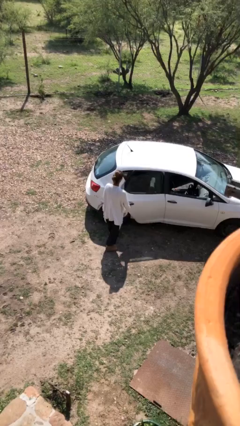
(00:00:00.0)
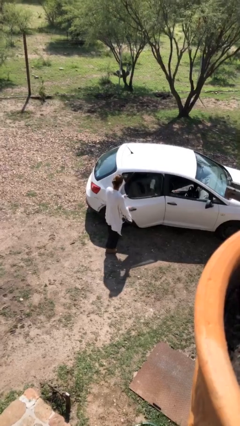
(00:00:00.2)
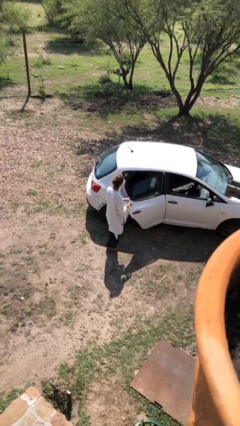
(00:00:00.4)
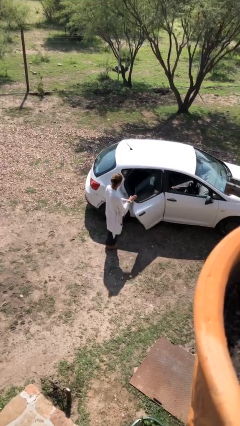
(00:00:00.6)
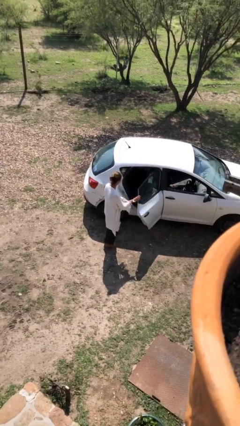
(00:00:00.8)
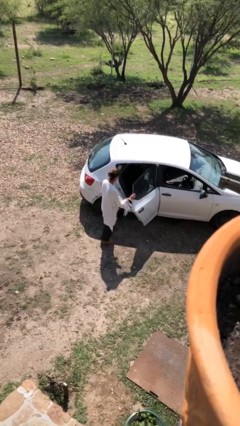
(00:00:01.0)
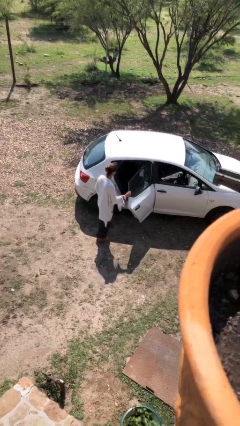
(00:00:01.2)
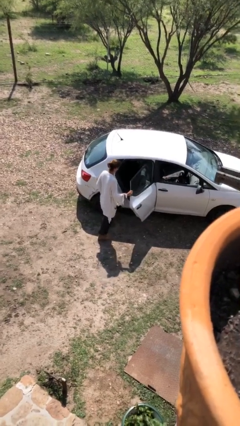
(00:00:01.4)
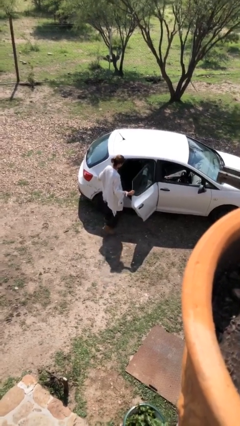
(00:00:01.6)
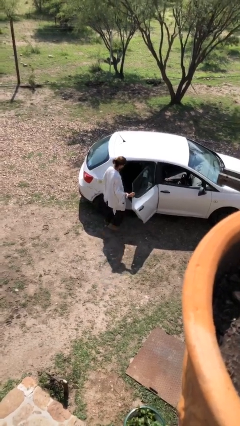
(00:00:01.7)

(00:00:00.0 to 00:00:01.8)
person opens car door

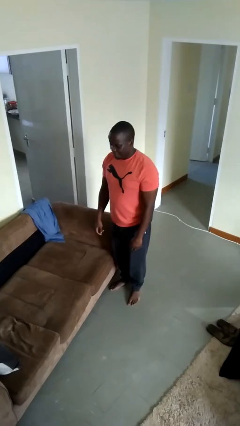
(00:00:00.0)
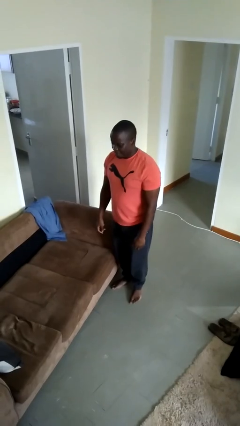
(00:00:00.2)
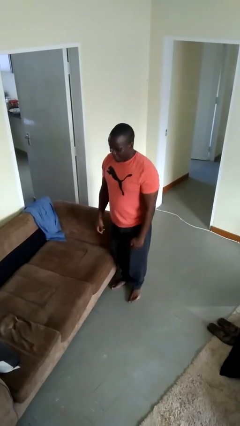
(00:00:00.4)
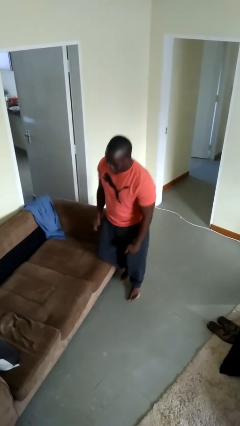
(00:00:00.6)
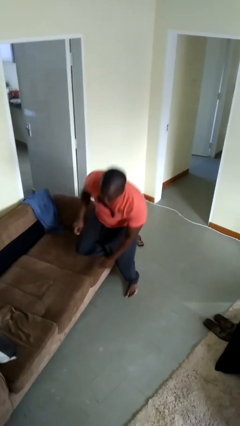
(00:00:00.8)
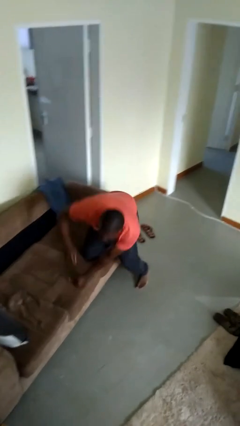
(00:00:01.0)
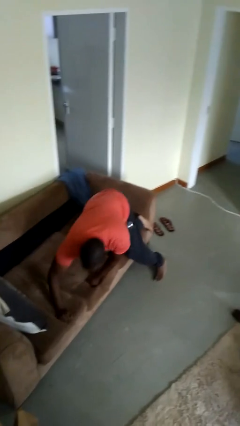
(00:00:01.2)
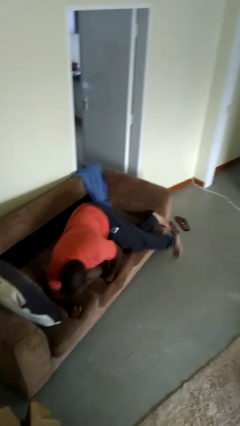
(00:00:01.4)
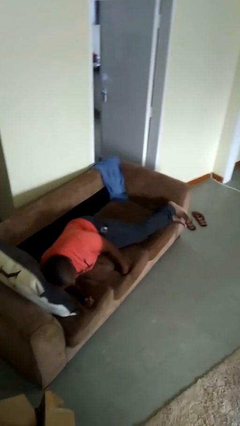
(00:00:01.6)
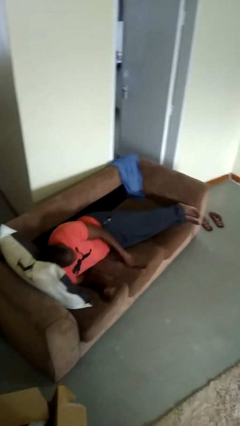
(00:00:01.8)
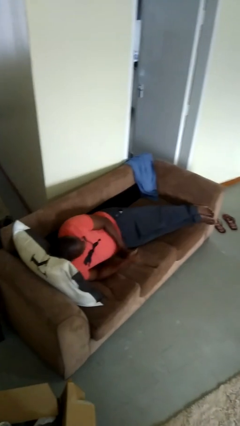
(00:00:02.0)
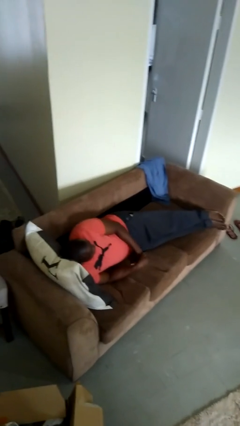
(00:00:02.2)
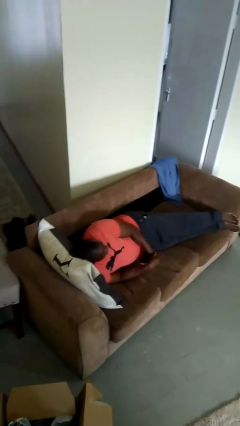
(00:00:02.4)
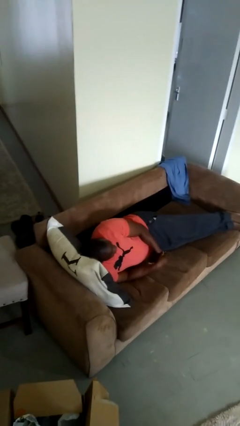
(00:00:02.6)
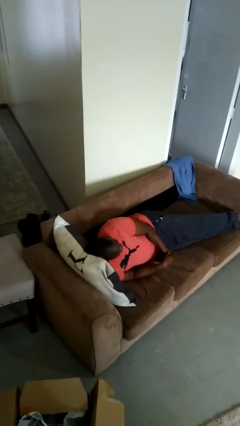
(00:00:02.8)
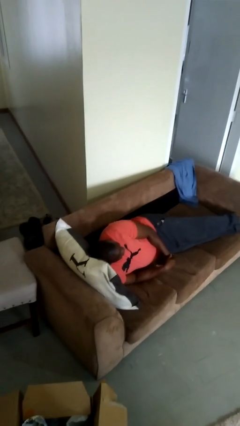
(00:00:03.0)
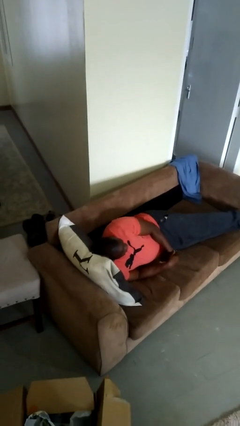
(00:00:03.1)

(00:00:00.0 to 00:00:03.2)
person lies down on couch

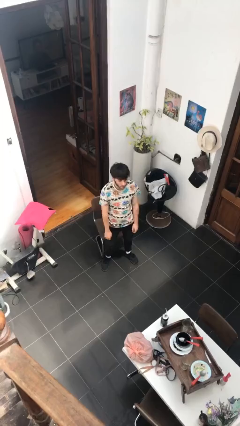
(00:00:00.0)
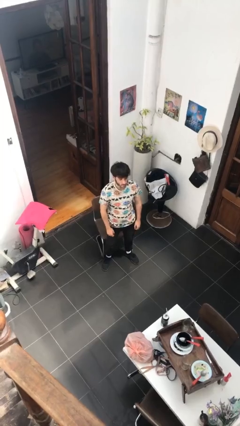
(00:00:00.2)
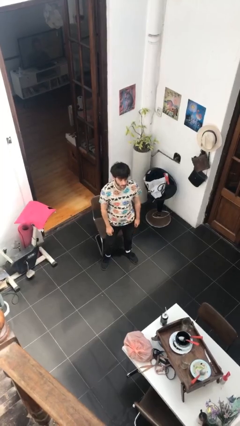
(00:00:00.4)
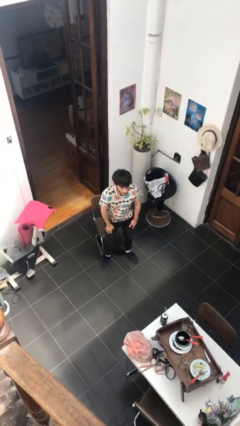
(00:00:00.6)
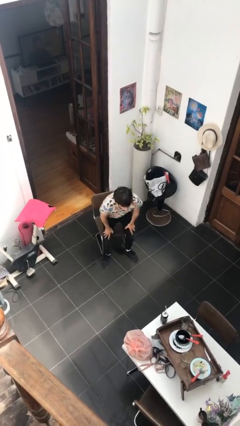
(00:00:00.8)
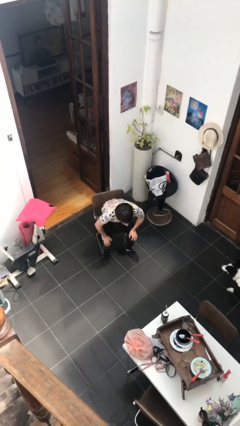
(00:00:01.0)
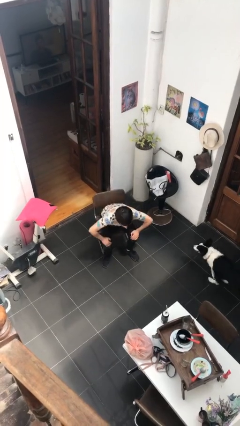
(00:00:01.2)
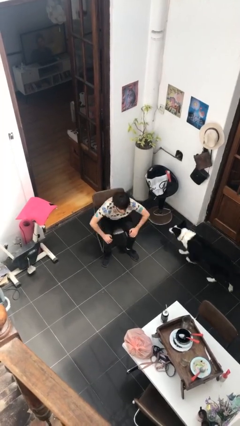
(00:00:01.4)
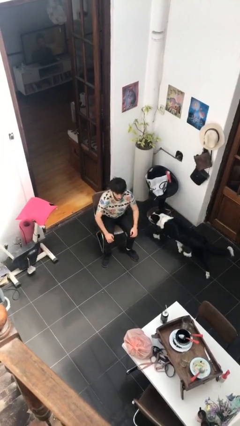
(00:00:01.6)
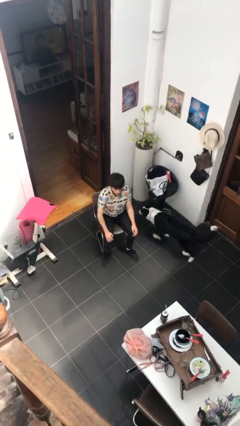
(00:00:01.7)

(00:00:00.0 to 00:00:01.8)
person sits down

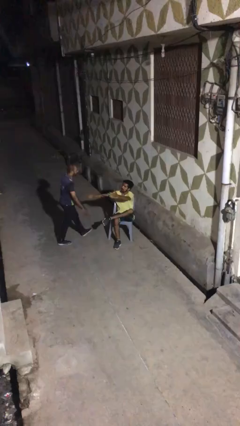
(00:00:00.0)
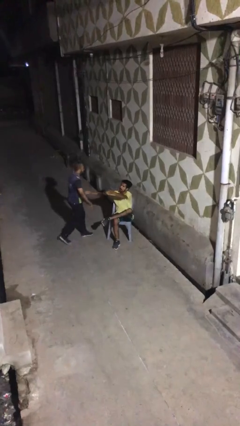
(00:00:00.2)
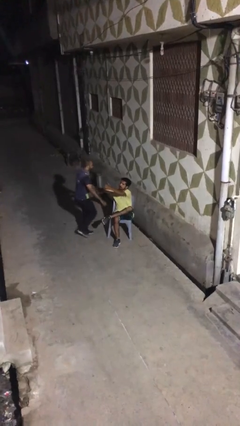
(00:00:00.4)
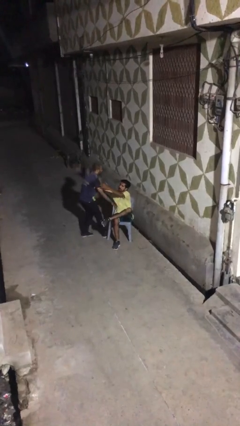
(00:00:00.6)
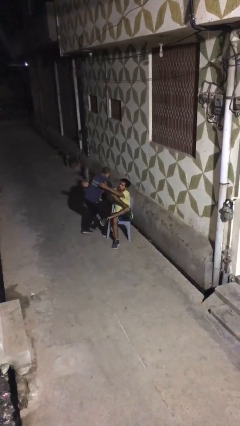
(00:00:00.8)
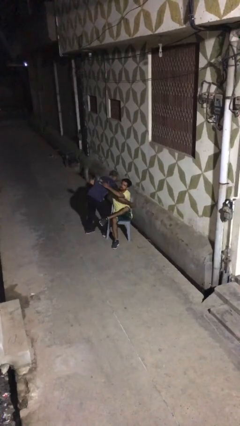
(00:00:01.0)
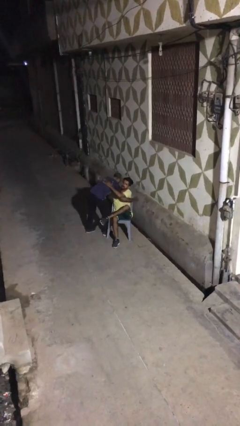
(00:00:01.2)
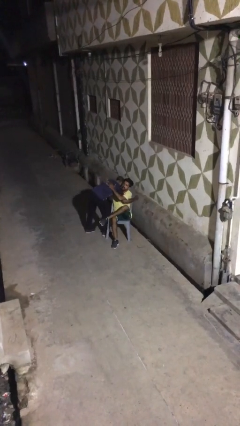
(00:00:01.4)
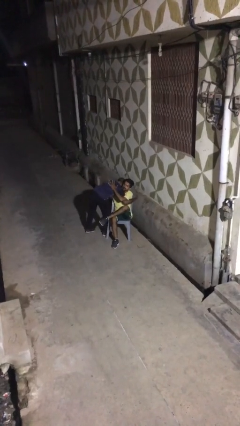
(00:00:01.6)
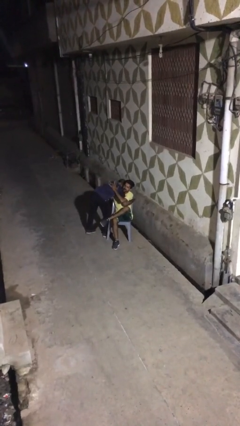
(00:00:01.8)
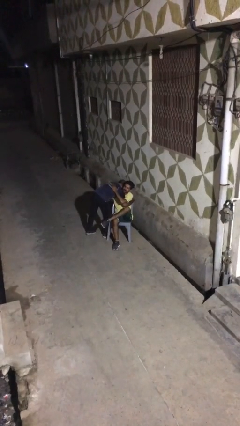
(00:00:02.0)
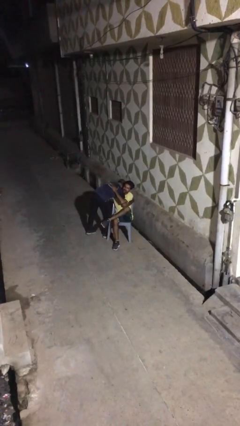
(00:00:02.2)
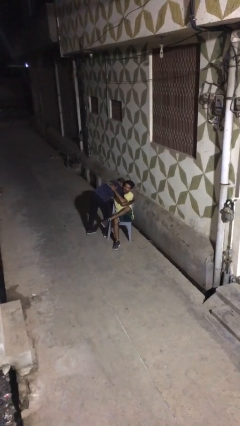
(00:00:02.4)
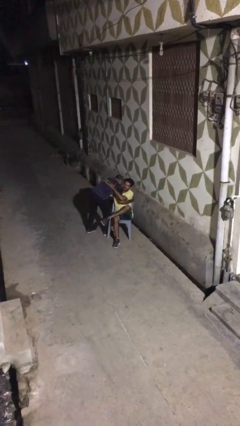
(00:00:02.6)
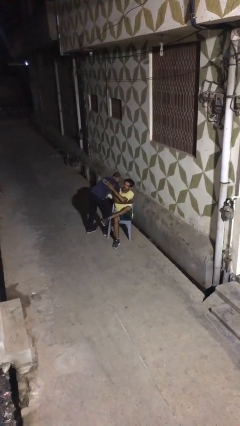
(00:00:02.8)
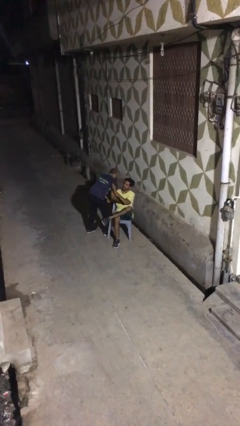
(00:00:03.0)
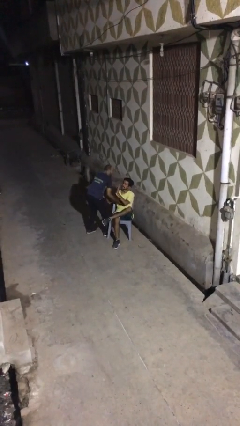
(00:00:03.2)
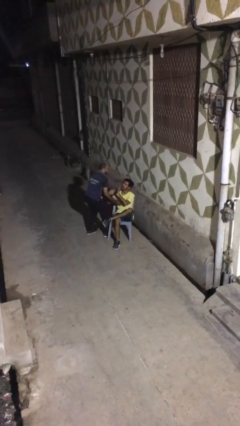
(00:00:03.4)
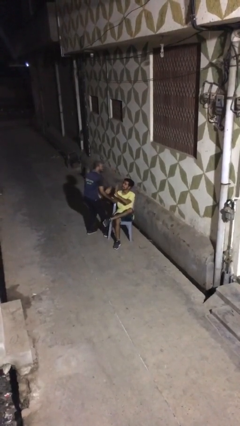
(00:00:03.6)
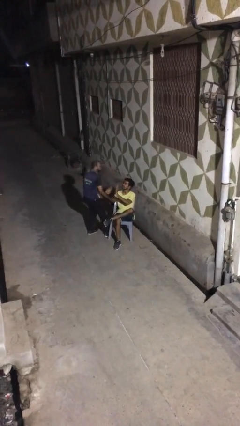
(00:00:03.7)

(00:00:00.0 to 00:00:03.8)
person embraces person

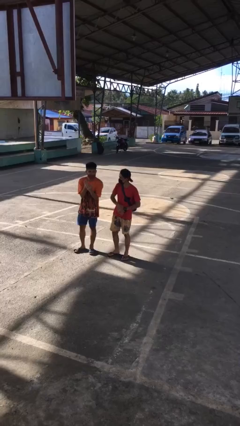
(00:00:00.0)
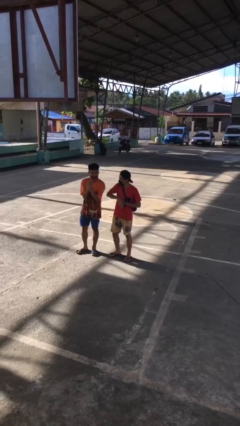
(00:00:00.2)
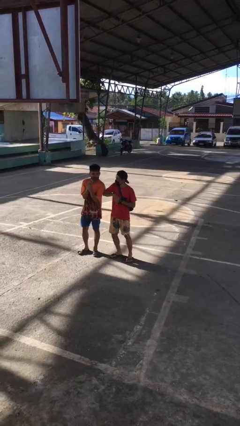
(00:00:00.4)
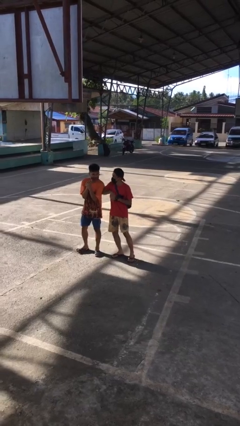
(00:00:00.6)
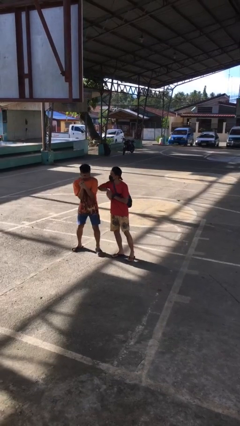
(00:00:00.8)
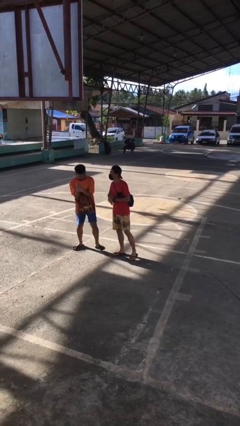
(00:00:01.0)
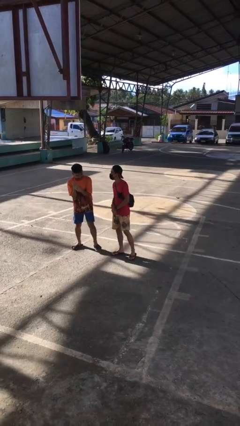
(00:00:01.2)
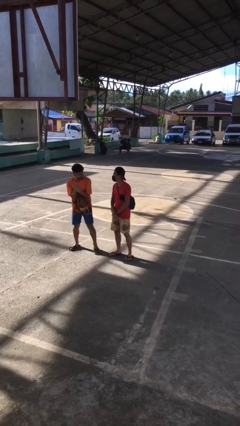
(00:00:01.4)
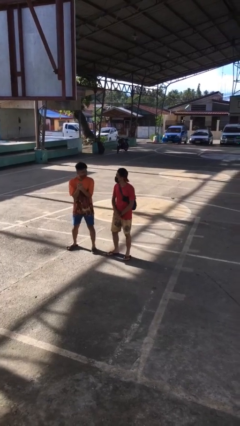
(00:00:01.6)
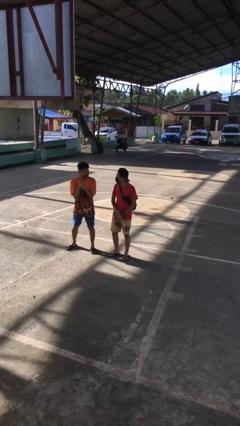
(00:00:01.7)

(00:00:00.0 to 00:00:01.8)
person nudges person with elbow

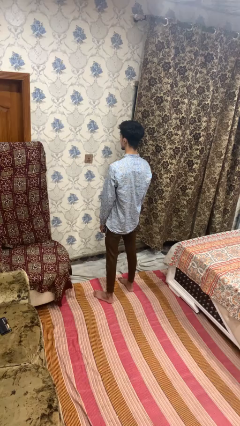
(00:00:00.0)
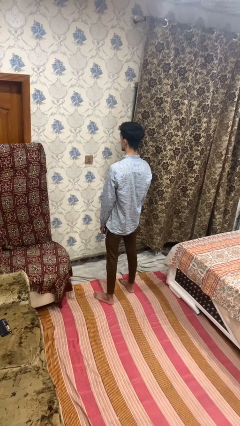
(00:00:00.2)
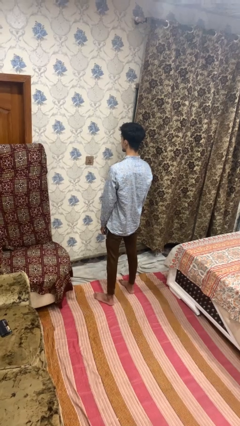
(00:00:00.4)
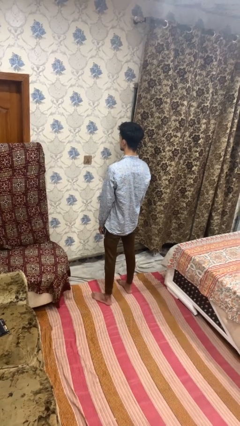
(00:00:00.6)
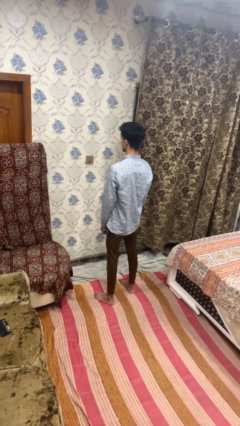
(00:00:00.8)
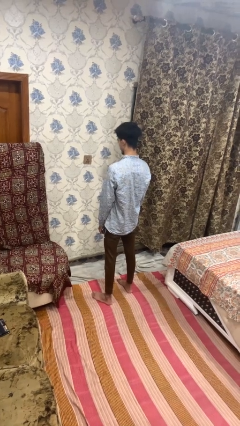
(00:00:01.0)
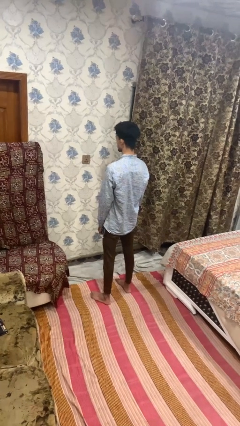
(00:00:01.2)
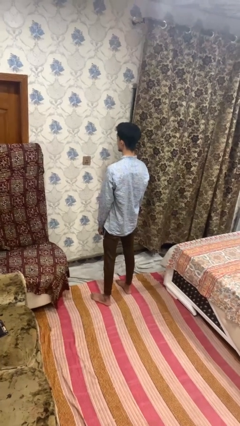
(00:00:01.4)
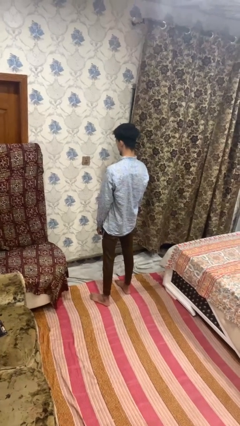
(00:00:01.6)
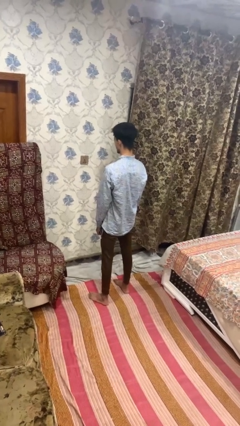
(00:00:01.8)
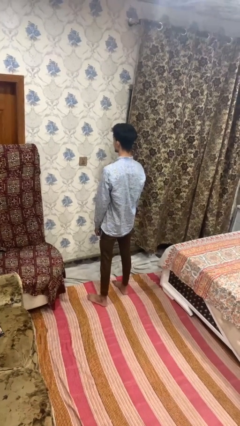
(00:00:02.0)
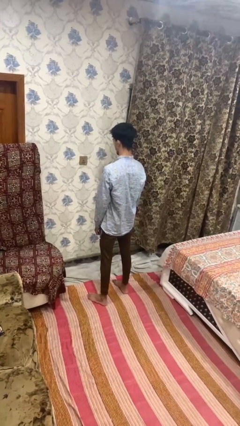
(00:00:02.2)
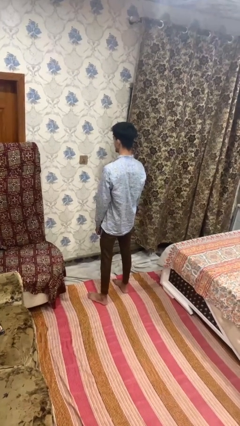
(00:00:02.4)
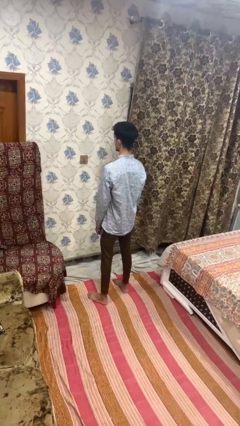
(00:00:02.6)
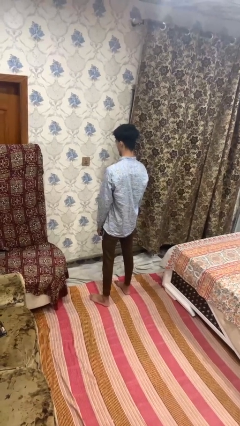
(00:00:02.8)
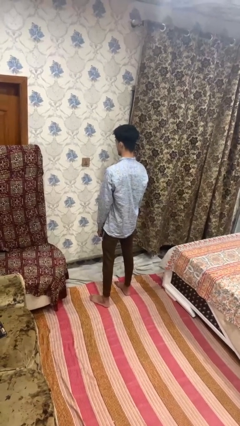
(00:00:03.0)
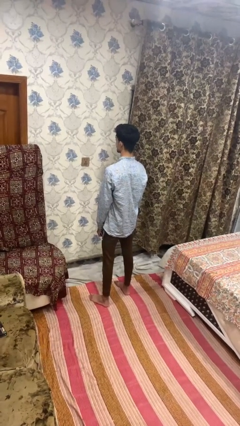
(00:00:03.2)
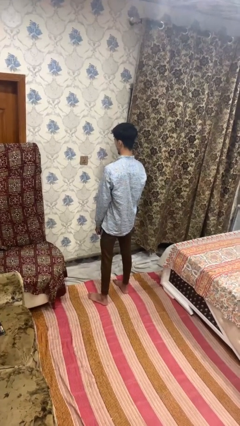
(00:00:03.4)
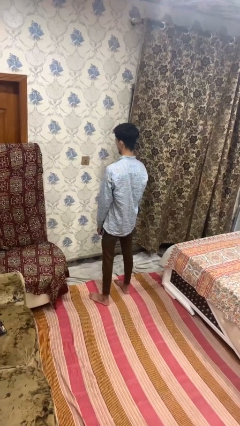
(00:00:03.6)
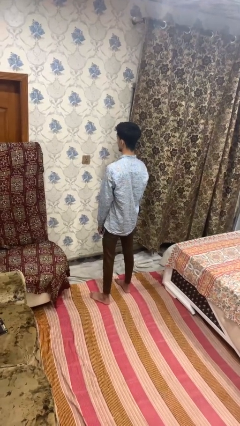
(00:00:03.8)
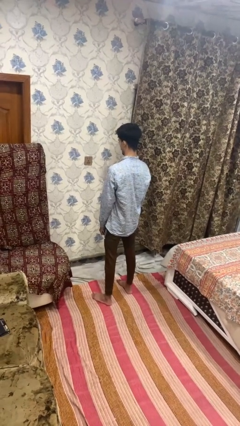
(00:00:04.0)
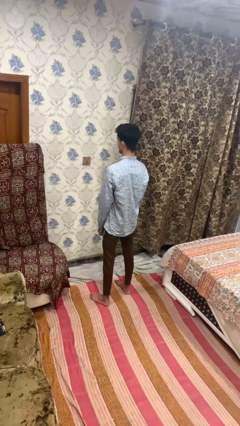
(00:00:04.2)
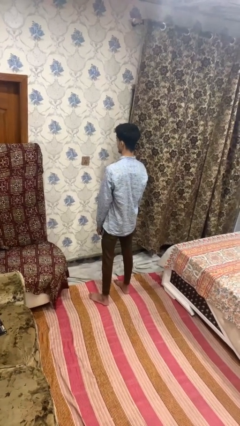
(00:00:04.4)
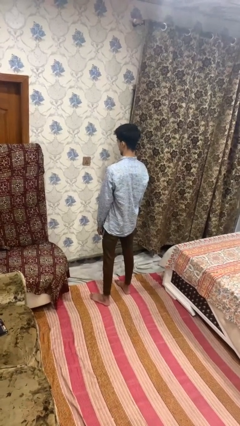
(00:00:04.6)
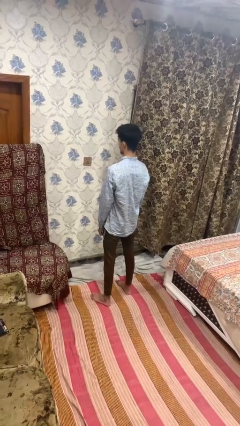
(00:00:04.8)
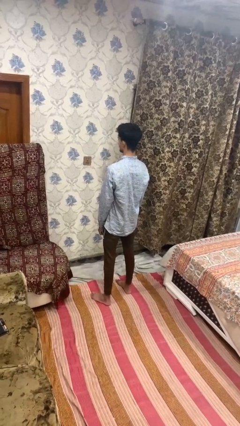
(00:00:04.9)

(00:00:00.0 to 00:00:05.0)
person nods head
